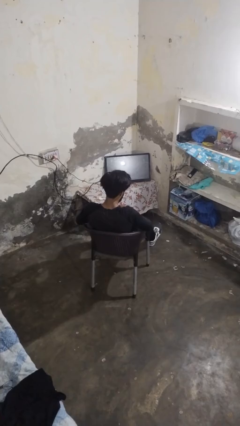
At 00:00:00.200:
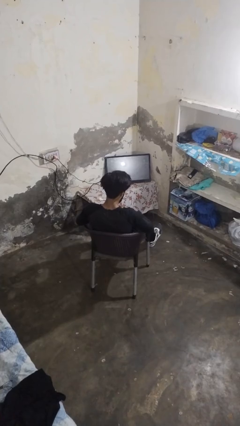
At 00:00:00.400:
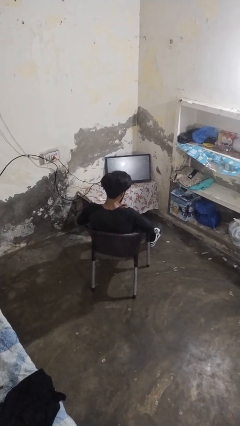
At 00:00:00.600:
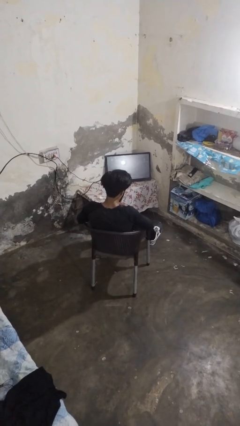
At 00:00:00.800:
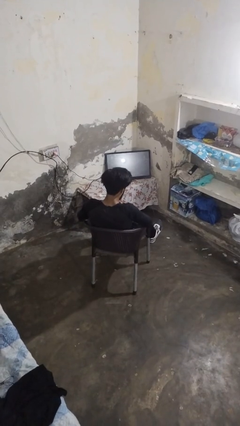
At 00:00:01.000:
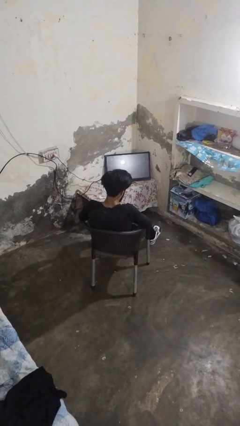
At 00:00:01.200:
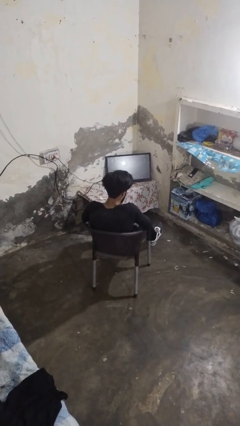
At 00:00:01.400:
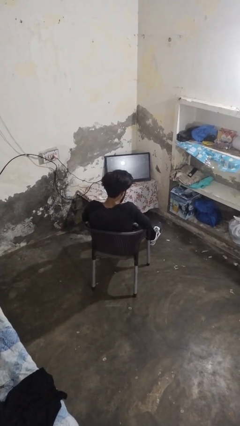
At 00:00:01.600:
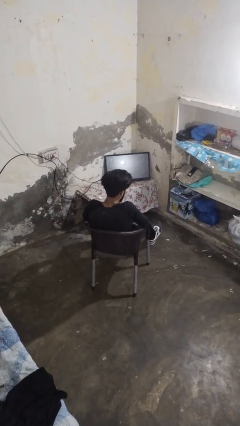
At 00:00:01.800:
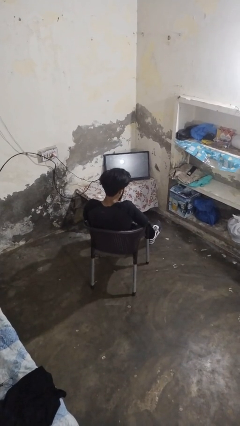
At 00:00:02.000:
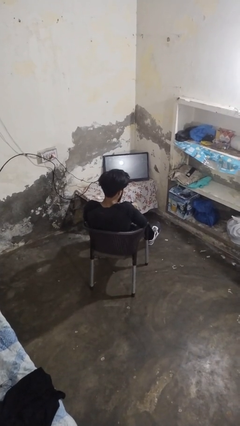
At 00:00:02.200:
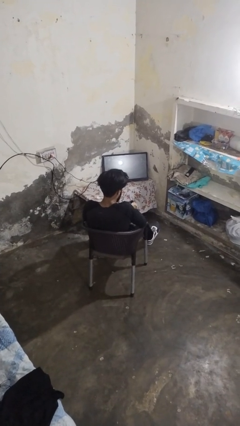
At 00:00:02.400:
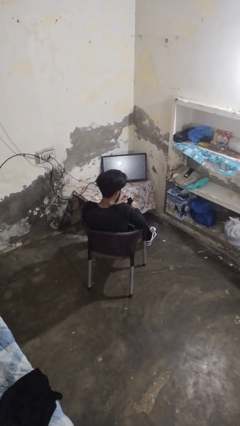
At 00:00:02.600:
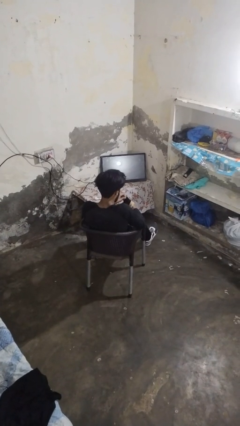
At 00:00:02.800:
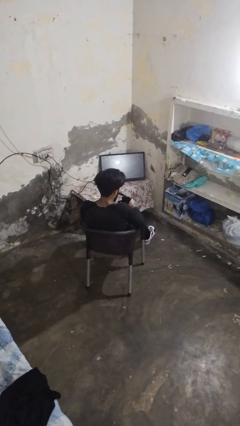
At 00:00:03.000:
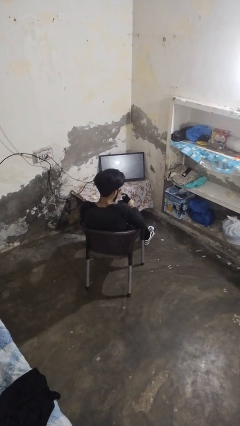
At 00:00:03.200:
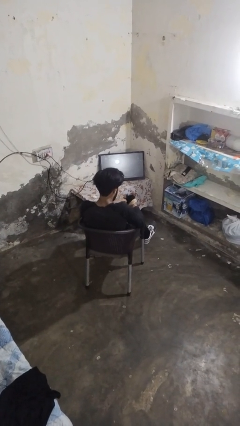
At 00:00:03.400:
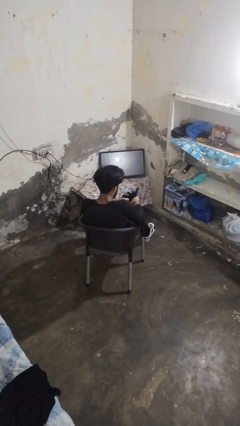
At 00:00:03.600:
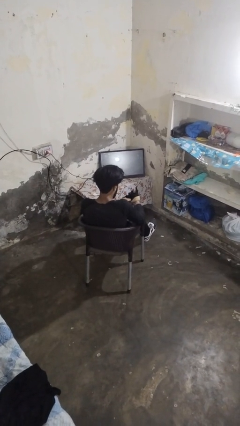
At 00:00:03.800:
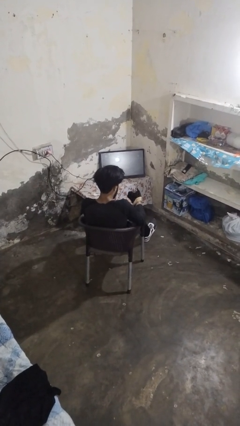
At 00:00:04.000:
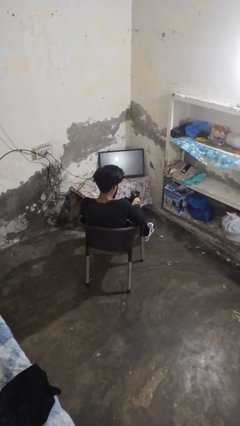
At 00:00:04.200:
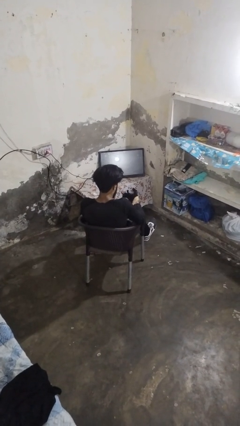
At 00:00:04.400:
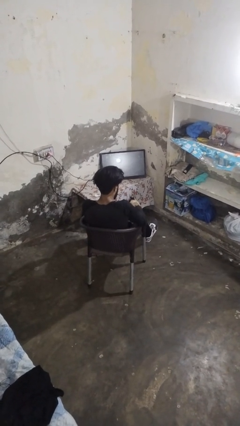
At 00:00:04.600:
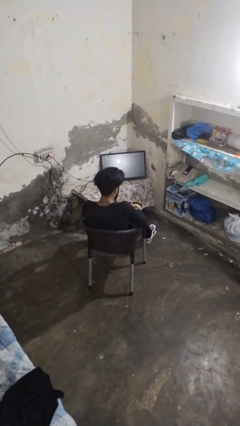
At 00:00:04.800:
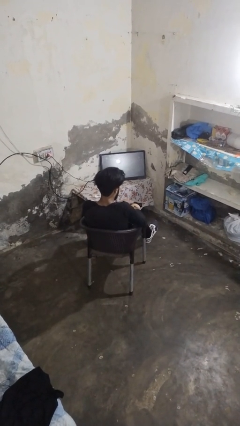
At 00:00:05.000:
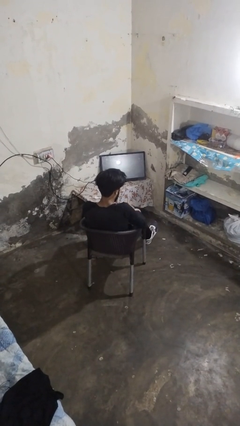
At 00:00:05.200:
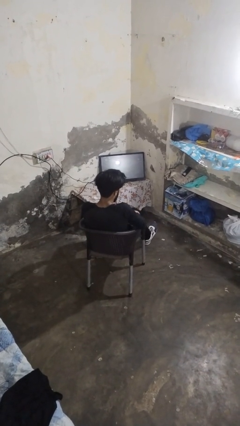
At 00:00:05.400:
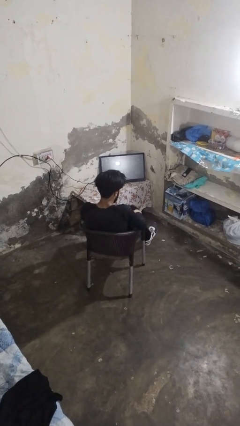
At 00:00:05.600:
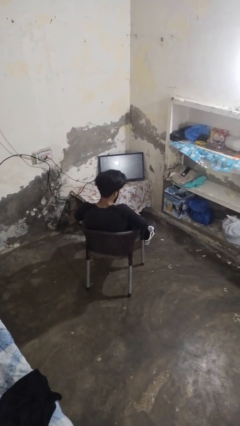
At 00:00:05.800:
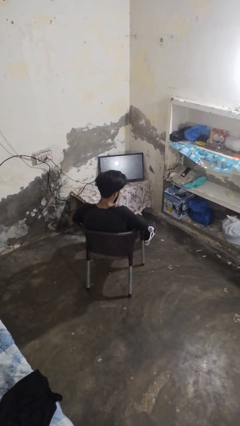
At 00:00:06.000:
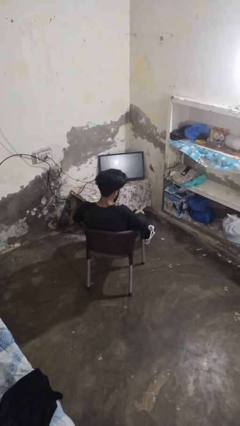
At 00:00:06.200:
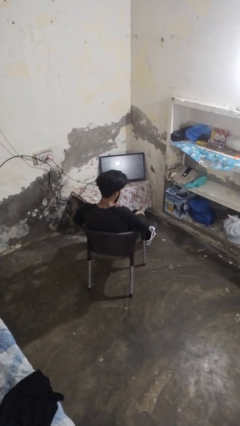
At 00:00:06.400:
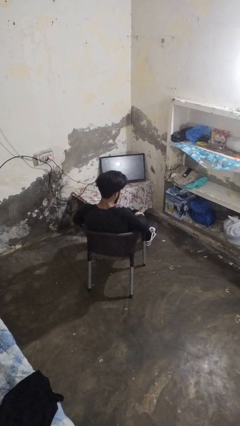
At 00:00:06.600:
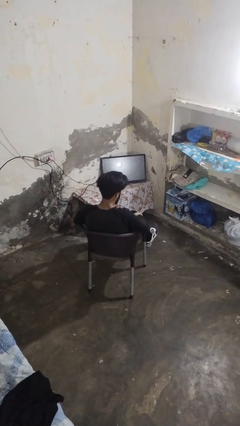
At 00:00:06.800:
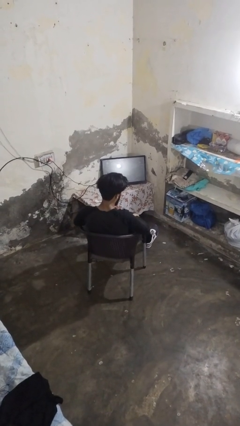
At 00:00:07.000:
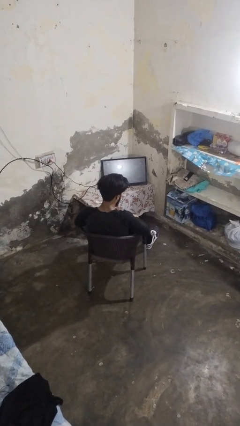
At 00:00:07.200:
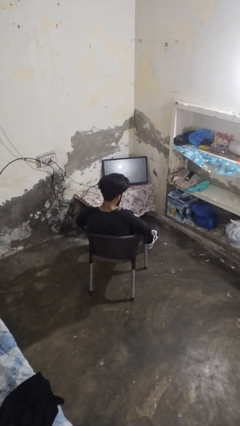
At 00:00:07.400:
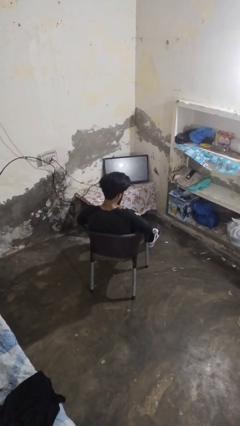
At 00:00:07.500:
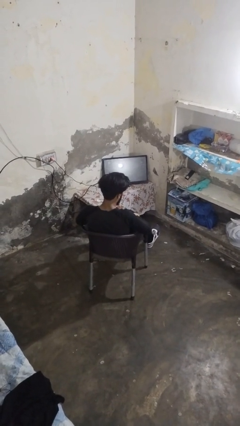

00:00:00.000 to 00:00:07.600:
person puts on gloves

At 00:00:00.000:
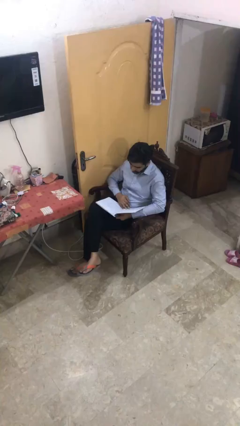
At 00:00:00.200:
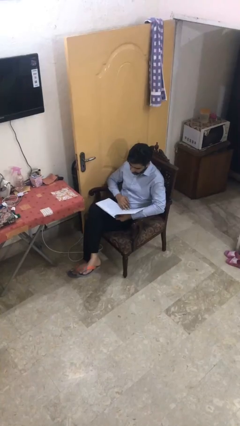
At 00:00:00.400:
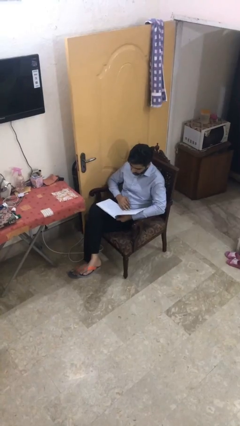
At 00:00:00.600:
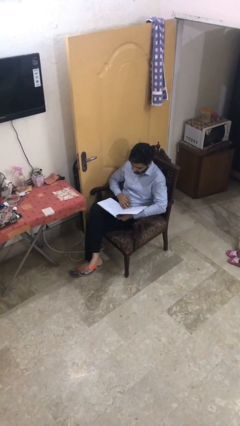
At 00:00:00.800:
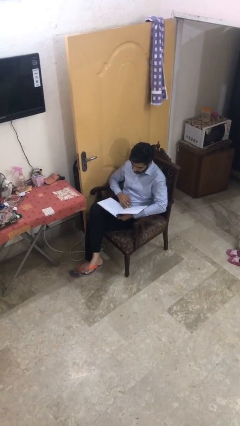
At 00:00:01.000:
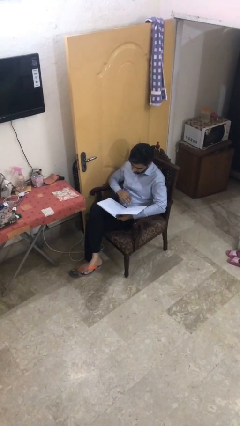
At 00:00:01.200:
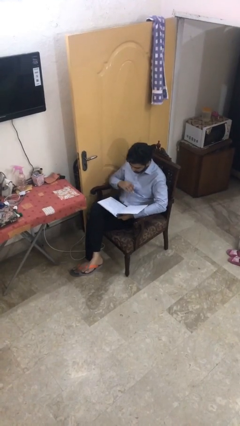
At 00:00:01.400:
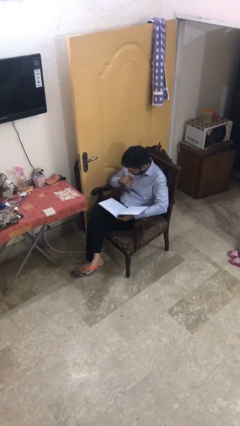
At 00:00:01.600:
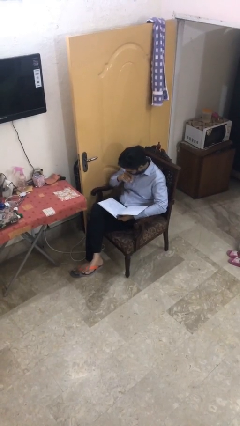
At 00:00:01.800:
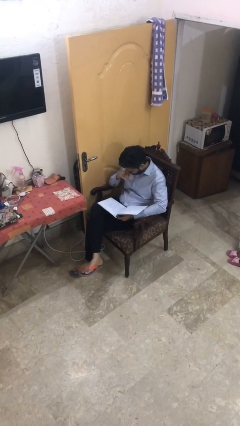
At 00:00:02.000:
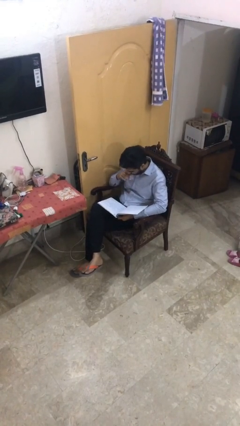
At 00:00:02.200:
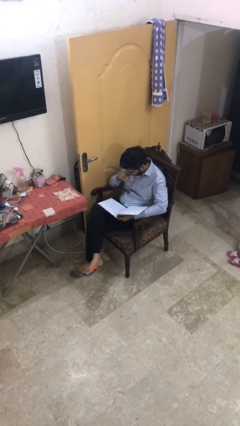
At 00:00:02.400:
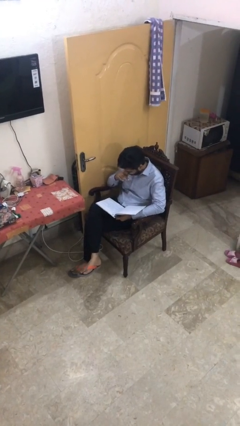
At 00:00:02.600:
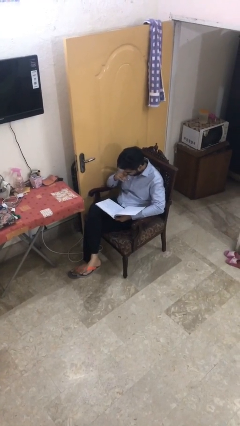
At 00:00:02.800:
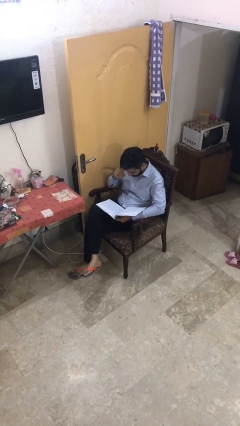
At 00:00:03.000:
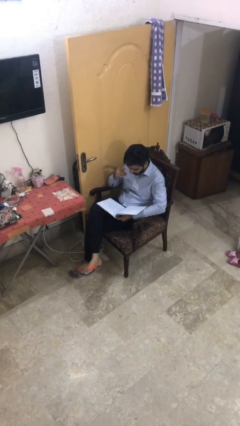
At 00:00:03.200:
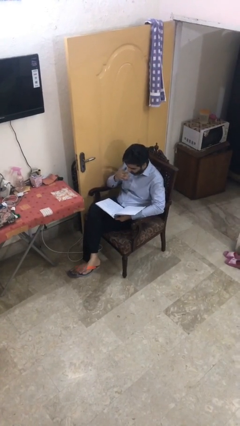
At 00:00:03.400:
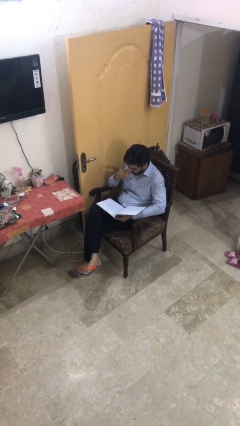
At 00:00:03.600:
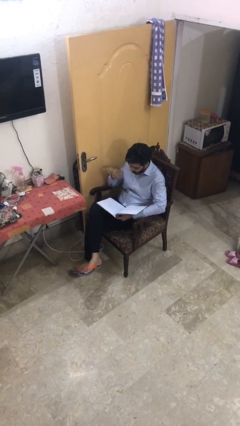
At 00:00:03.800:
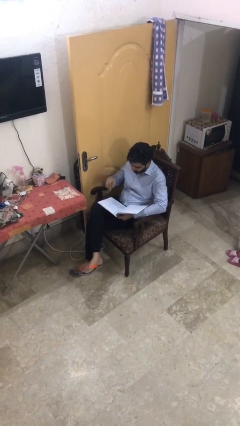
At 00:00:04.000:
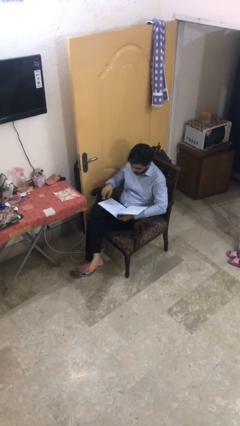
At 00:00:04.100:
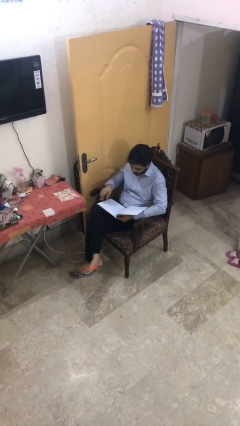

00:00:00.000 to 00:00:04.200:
person reads document

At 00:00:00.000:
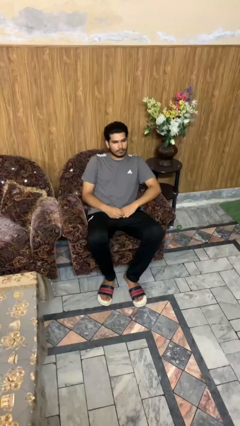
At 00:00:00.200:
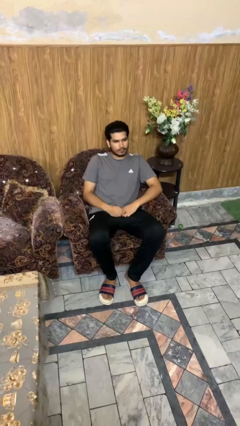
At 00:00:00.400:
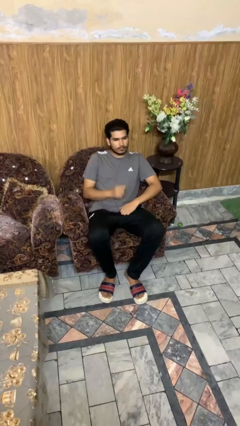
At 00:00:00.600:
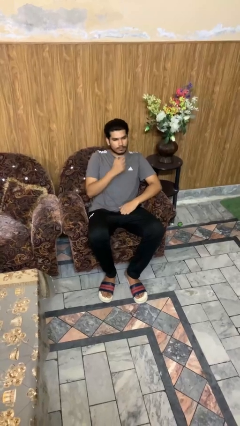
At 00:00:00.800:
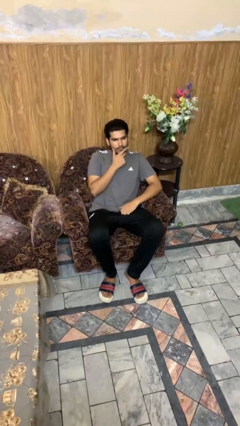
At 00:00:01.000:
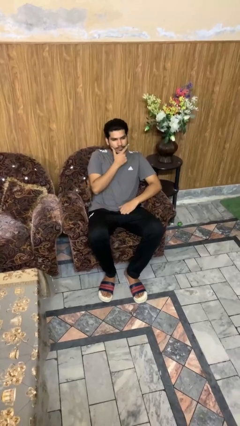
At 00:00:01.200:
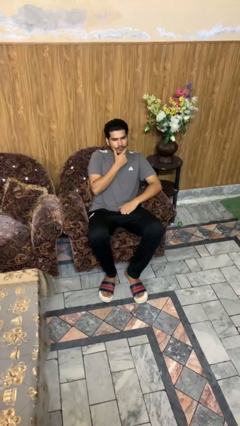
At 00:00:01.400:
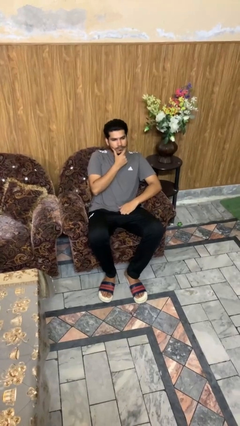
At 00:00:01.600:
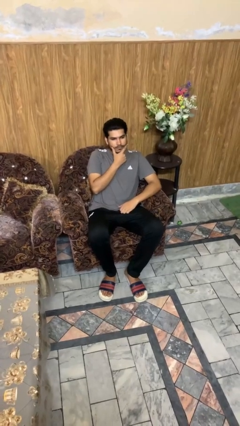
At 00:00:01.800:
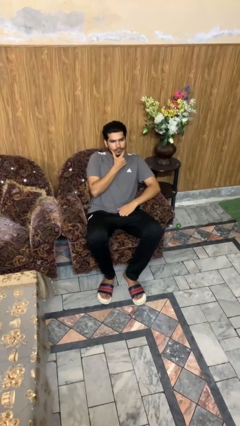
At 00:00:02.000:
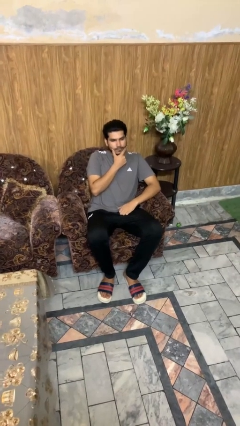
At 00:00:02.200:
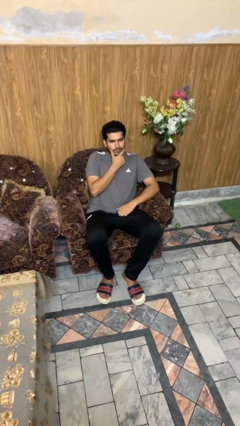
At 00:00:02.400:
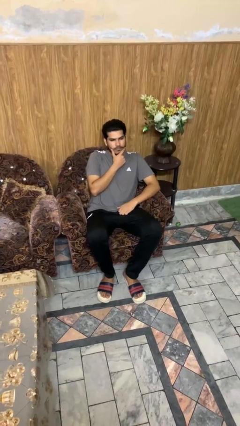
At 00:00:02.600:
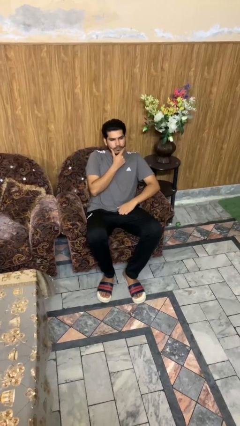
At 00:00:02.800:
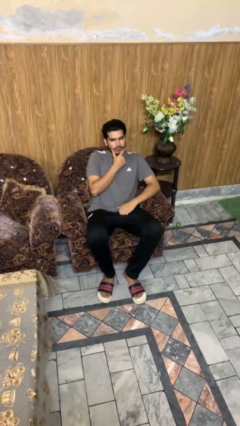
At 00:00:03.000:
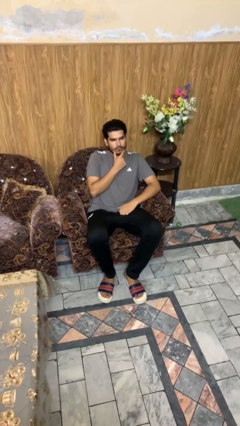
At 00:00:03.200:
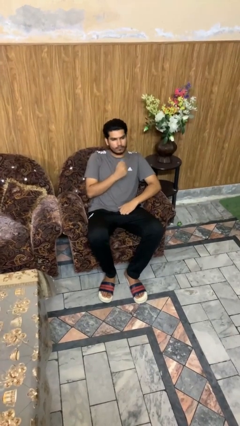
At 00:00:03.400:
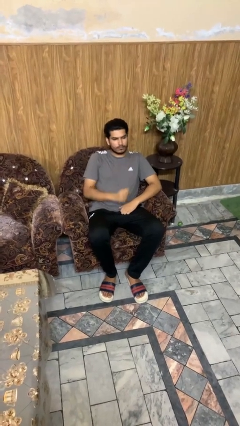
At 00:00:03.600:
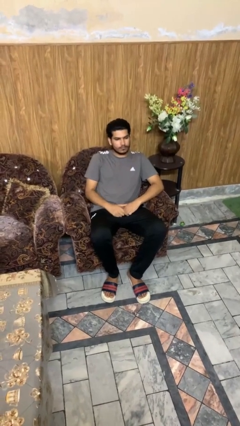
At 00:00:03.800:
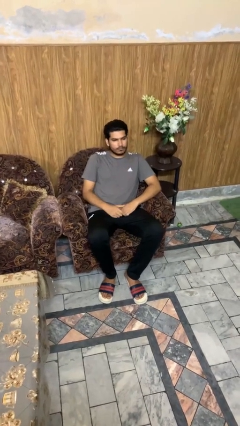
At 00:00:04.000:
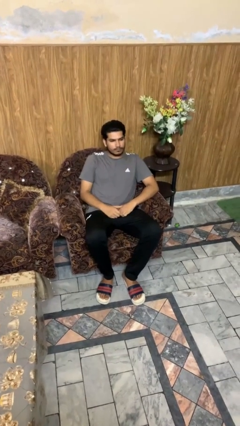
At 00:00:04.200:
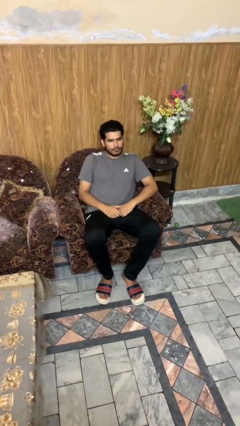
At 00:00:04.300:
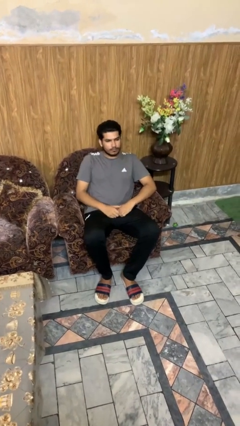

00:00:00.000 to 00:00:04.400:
person strokes chin

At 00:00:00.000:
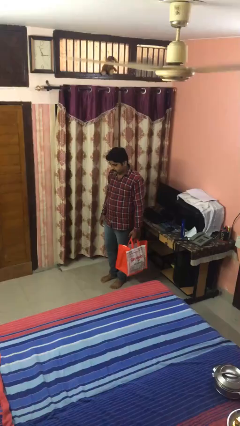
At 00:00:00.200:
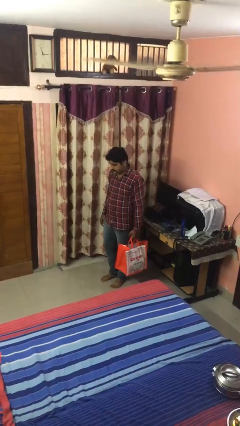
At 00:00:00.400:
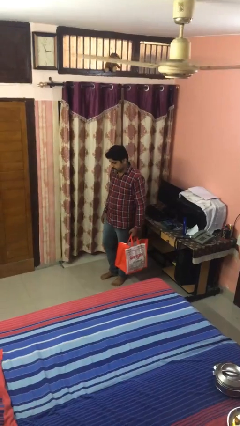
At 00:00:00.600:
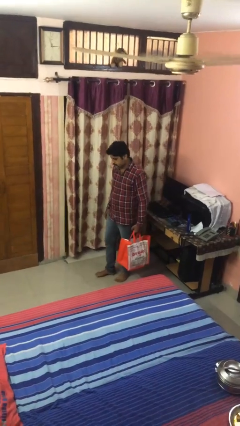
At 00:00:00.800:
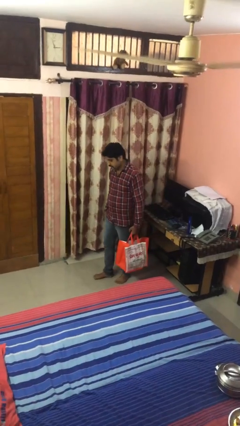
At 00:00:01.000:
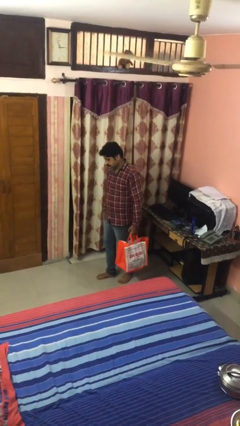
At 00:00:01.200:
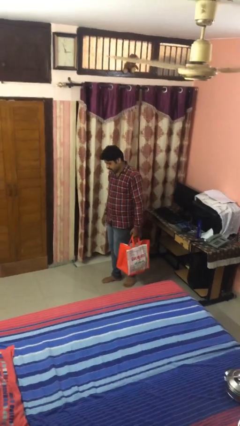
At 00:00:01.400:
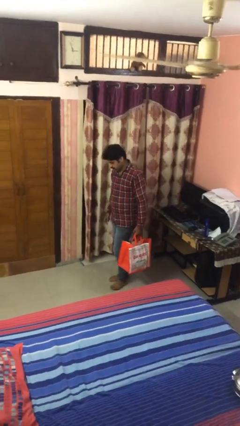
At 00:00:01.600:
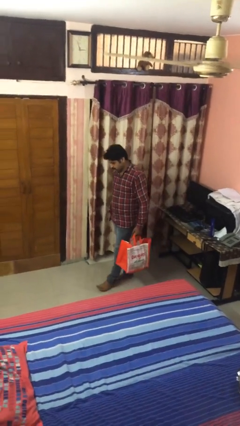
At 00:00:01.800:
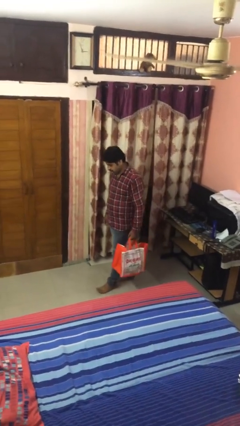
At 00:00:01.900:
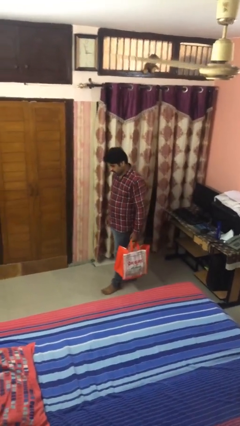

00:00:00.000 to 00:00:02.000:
person carries groceries
